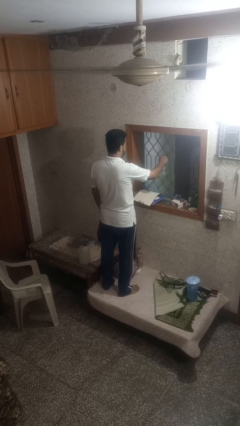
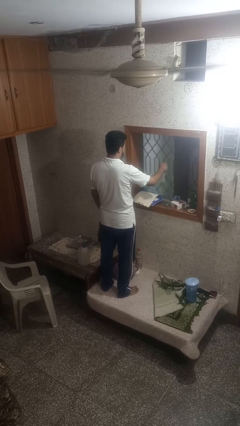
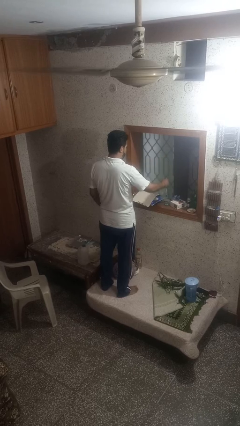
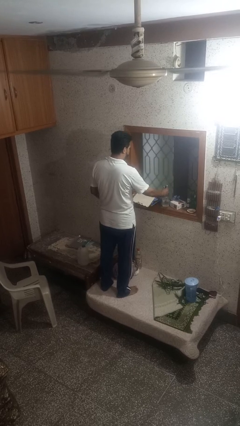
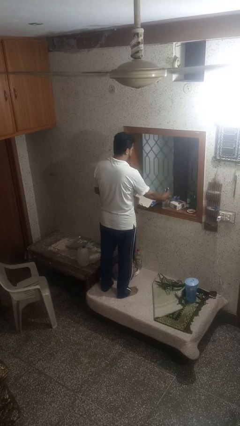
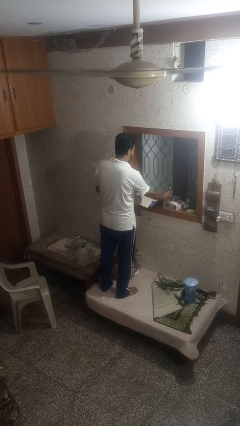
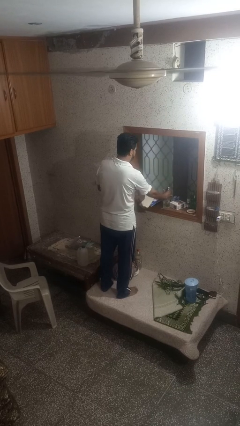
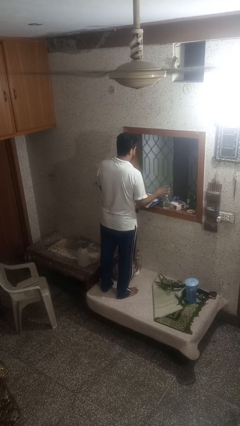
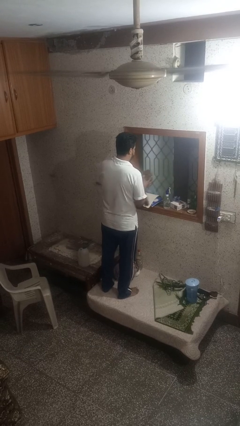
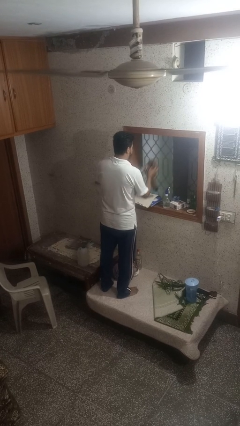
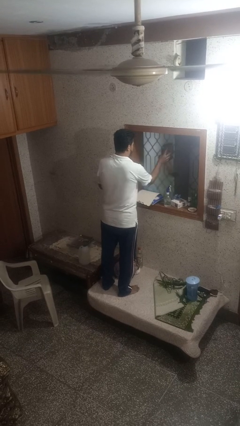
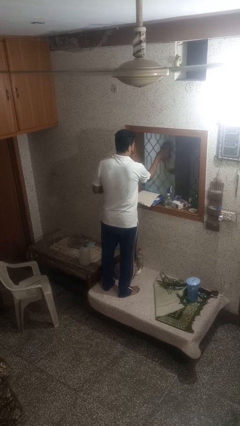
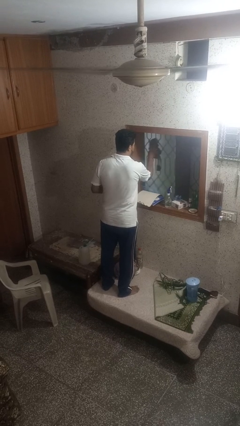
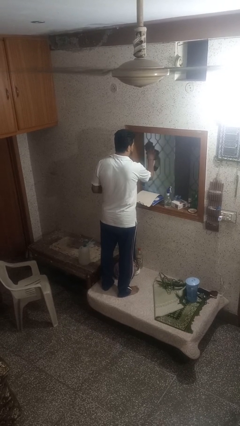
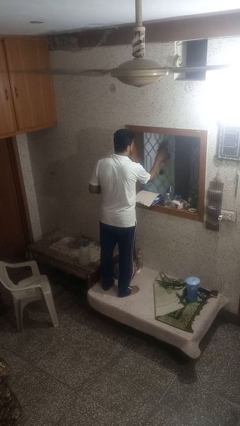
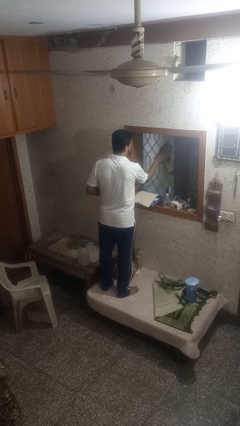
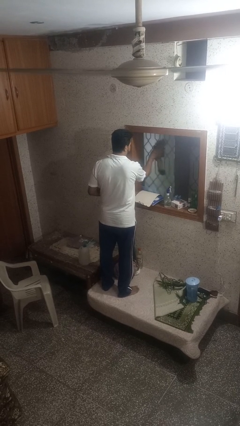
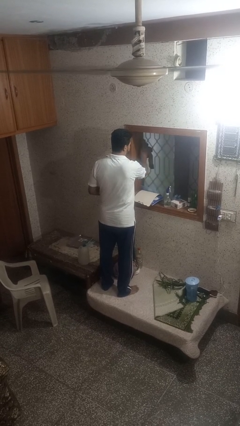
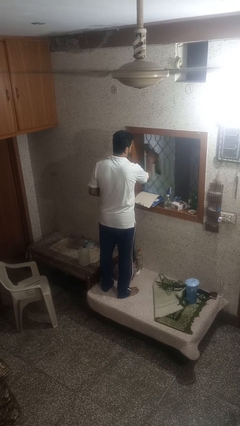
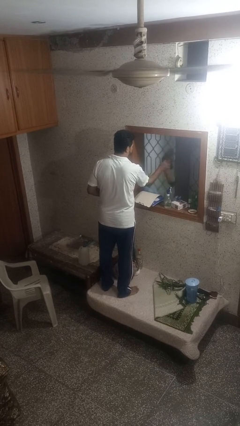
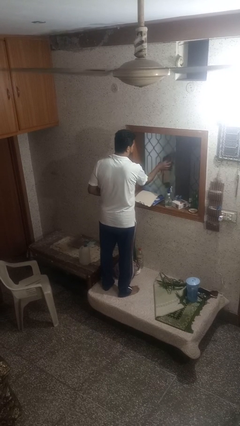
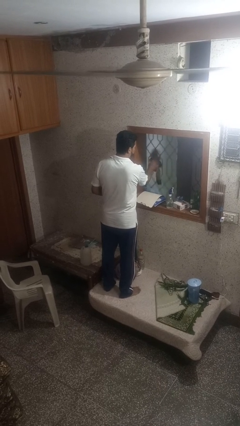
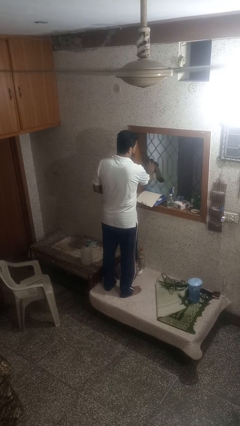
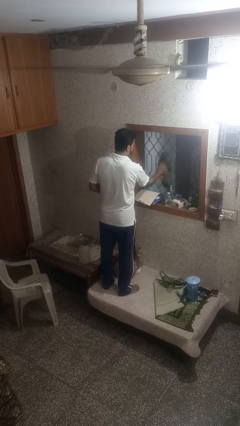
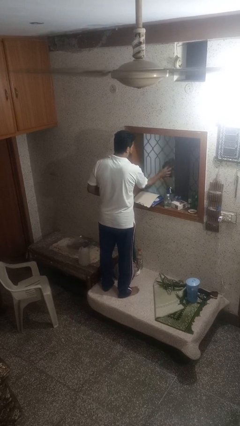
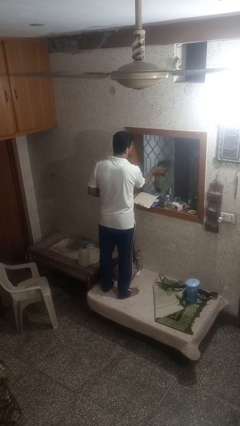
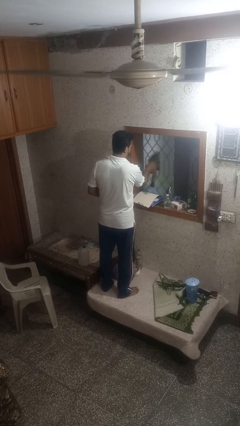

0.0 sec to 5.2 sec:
person washes window

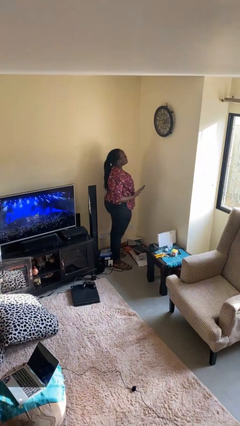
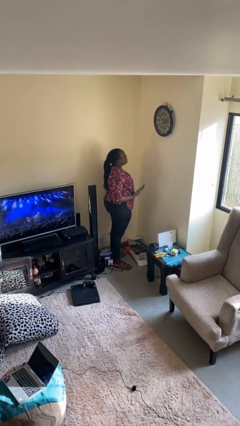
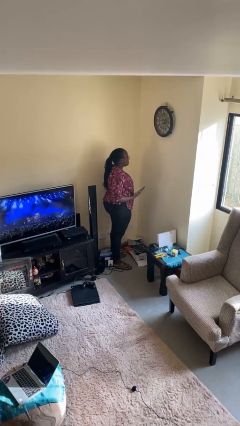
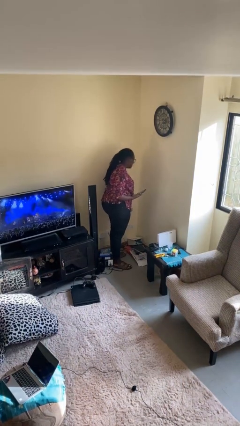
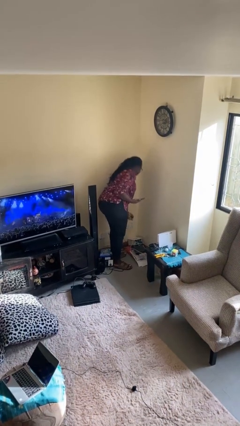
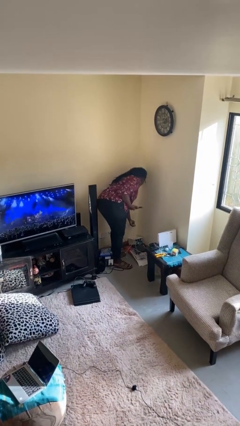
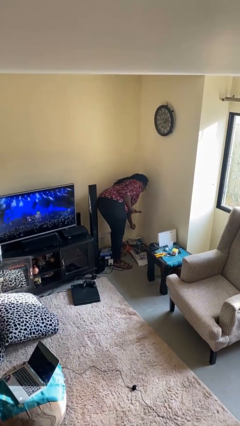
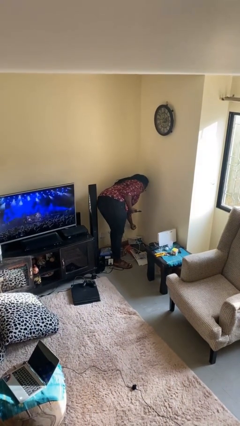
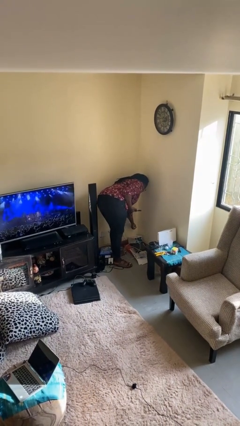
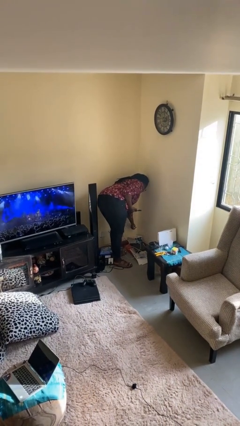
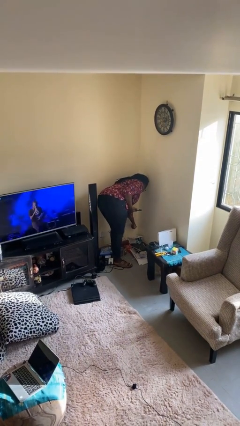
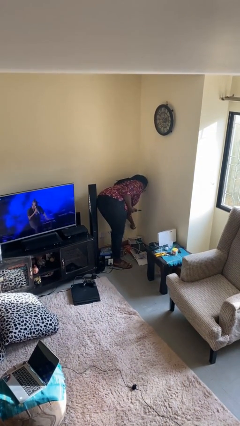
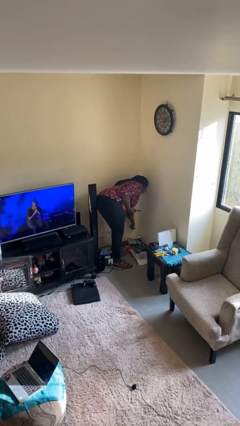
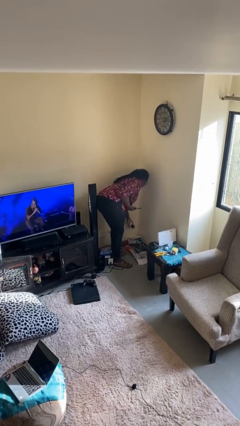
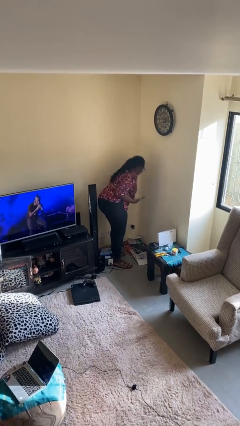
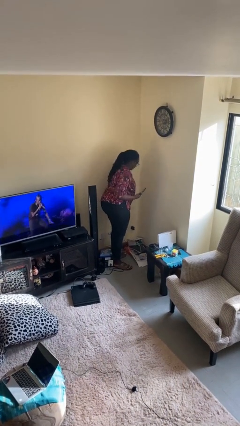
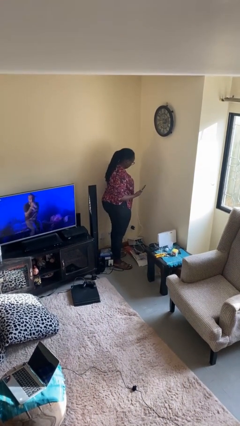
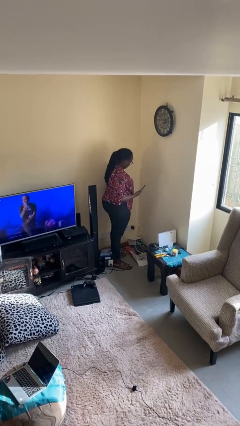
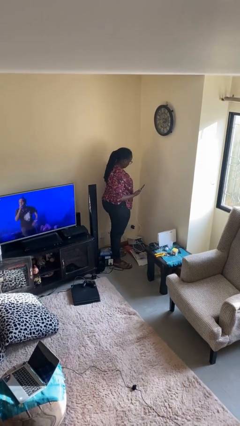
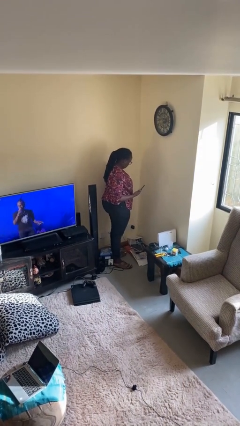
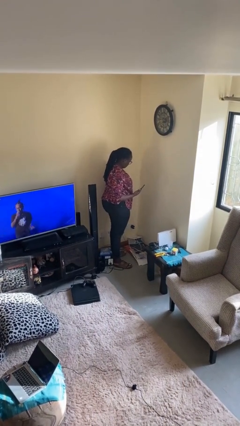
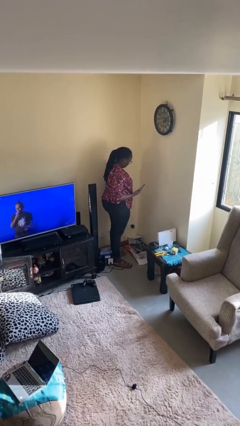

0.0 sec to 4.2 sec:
person plugs into electrical socket

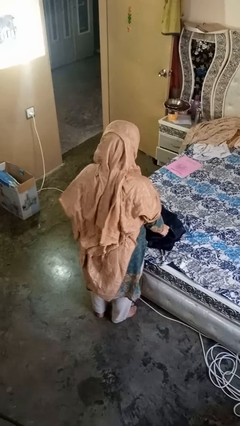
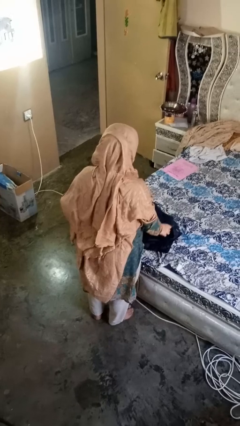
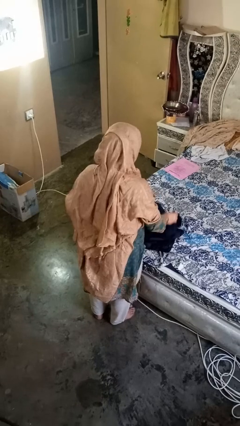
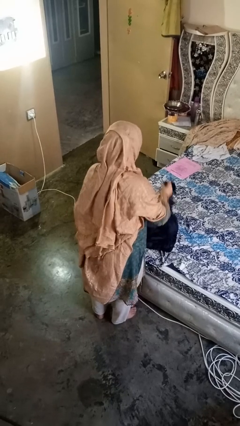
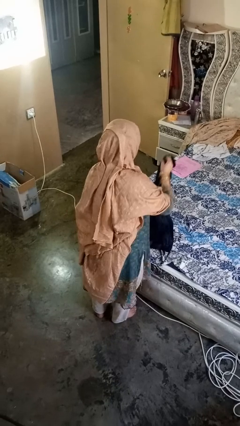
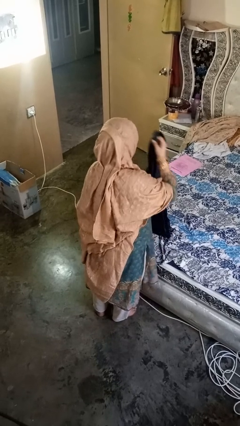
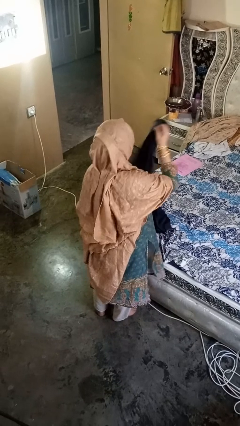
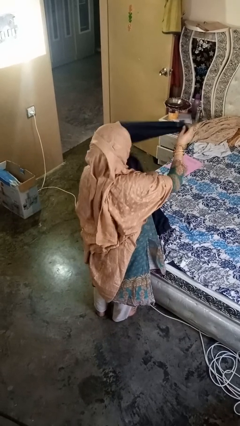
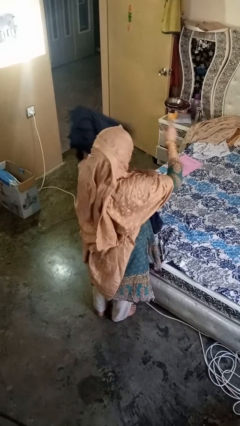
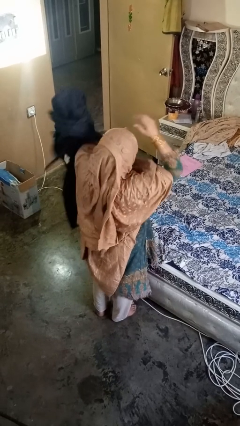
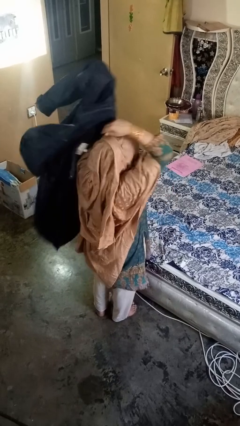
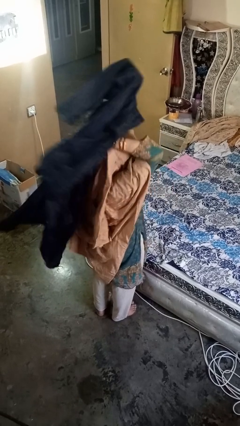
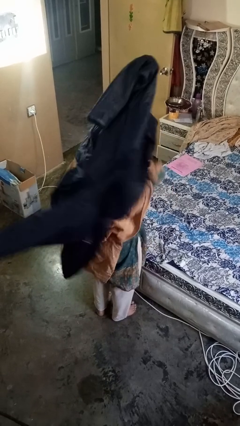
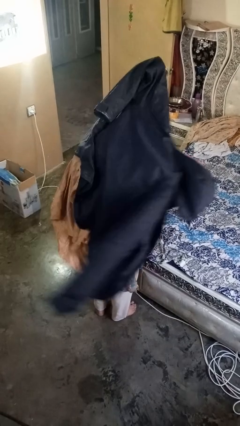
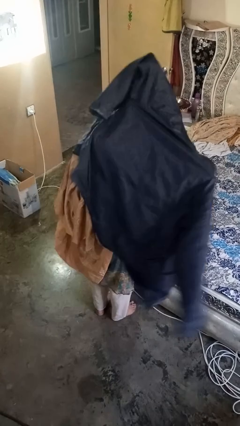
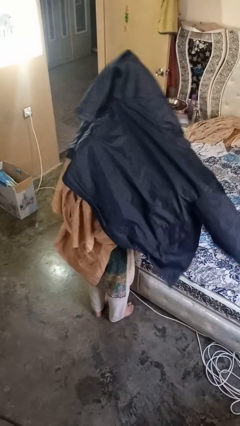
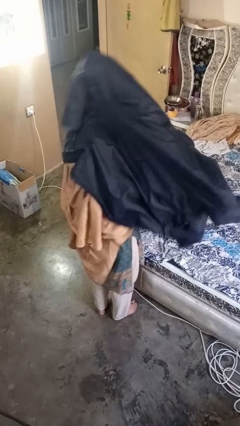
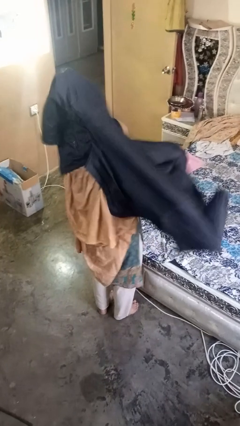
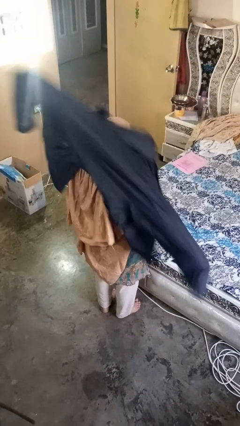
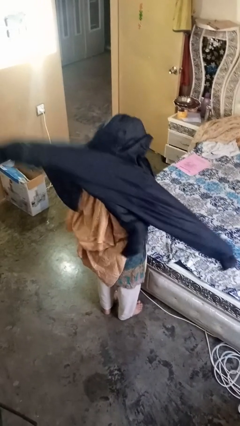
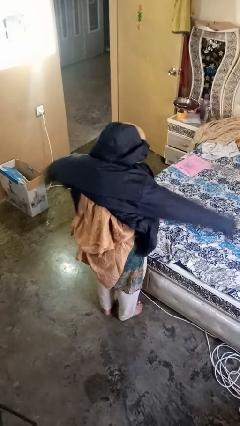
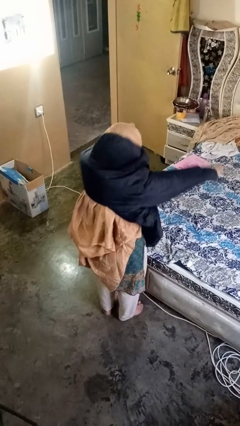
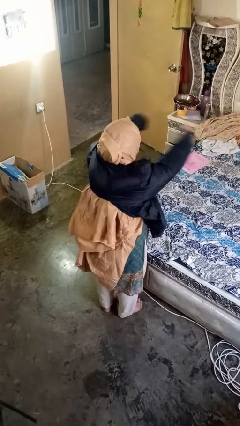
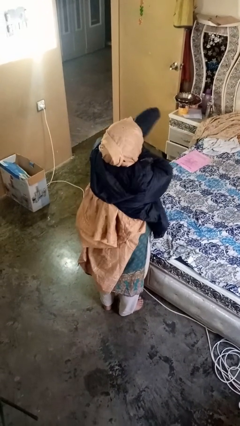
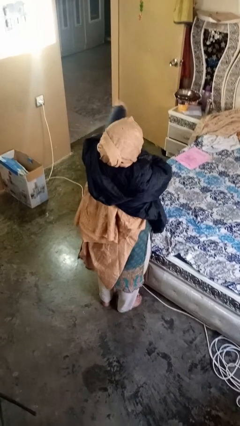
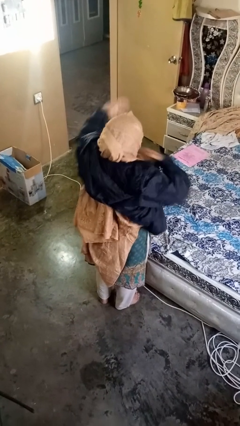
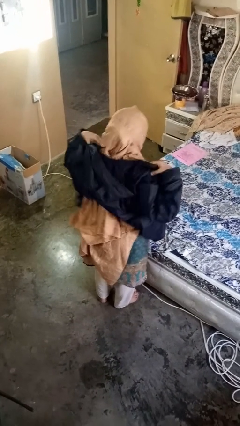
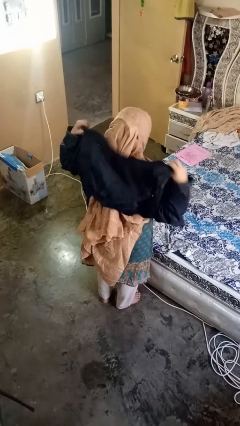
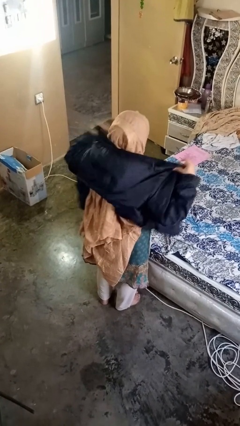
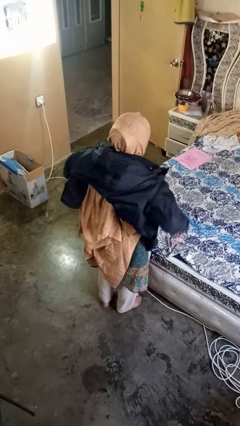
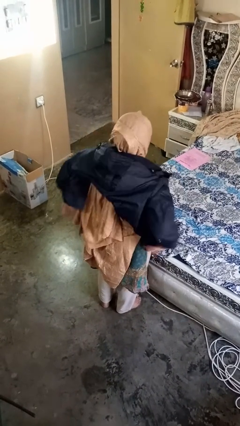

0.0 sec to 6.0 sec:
person puts on jacket

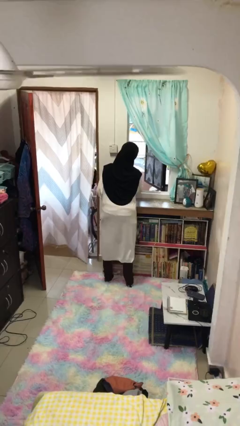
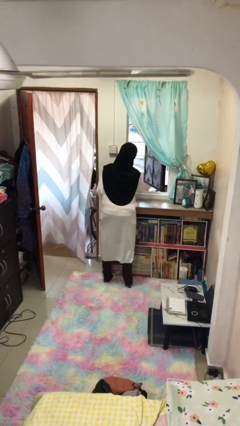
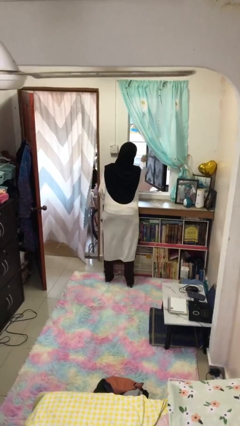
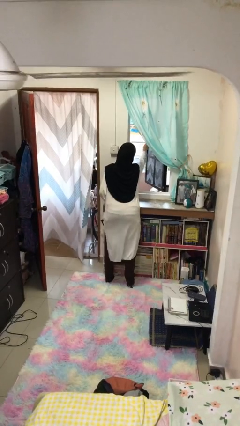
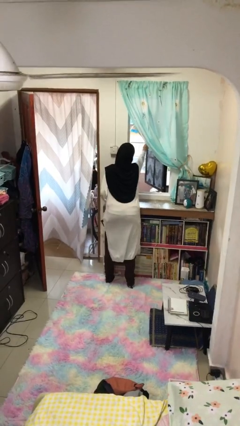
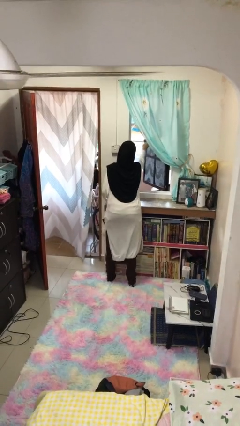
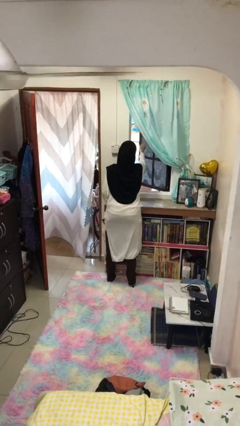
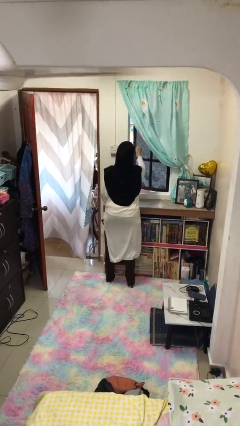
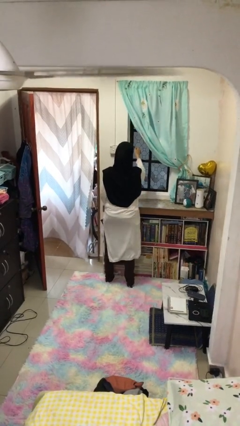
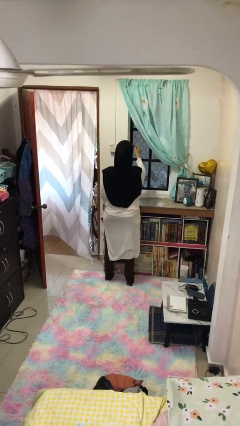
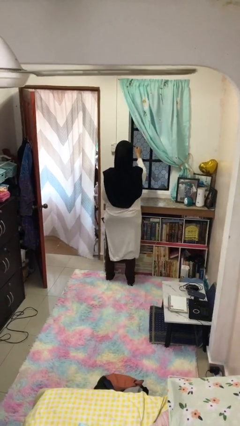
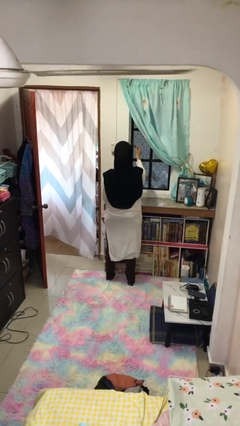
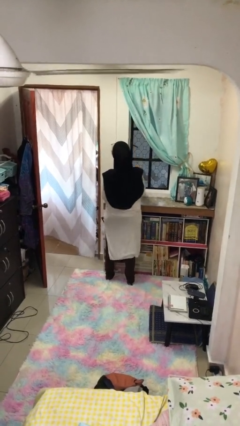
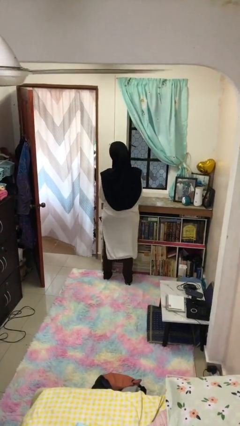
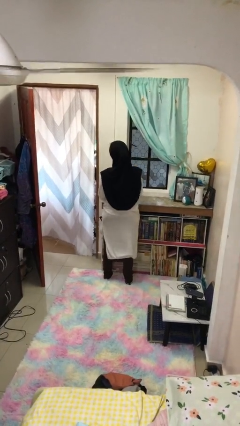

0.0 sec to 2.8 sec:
person closes home window
